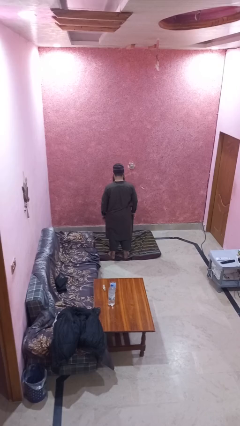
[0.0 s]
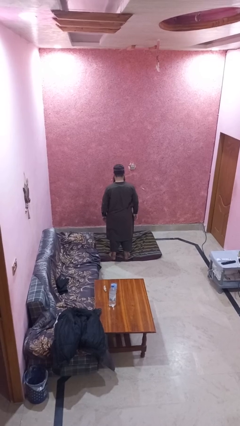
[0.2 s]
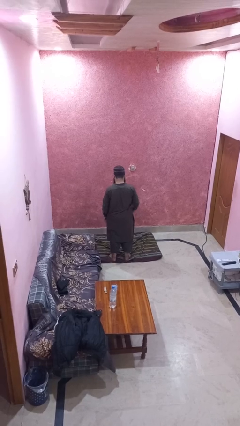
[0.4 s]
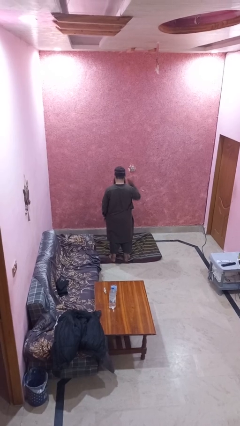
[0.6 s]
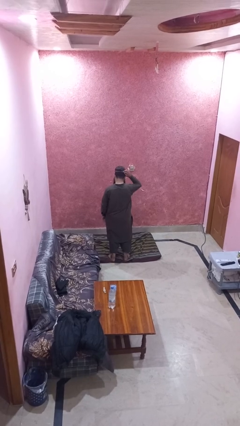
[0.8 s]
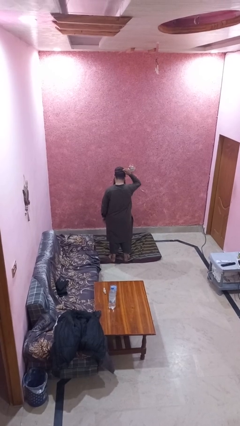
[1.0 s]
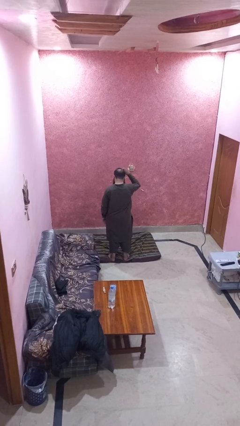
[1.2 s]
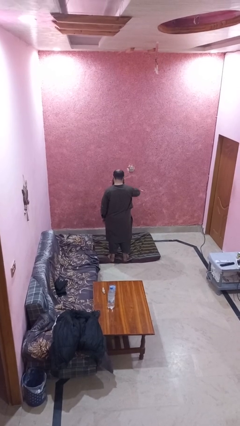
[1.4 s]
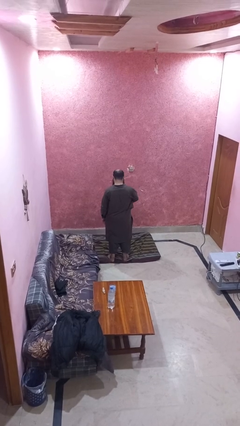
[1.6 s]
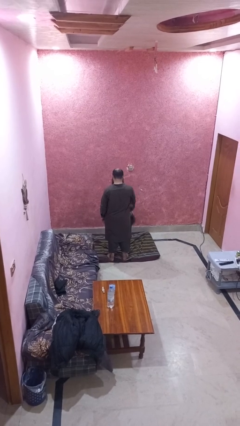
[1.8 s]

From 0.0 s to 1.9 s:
person takes off hat

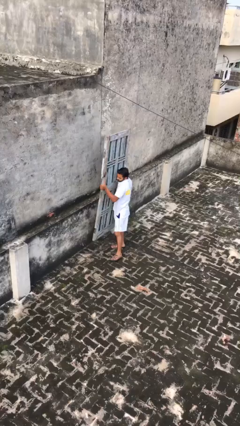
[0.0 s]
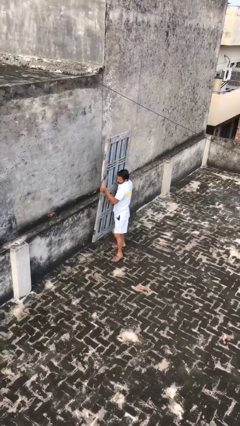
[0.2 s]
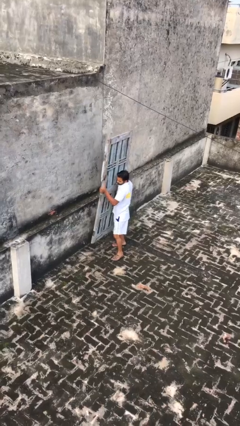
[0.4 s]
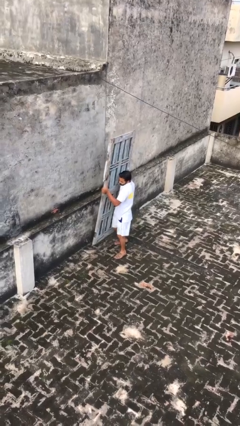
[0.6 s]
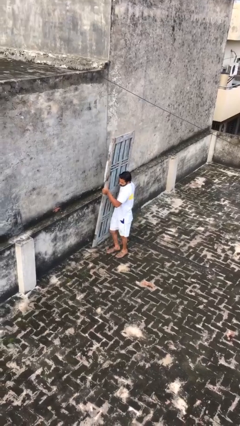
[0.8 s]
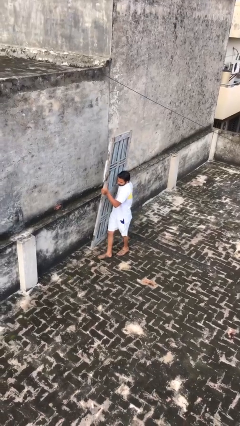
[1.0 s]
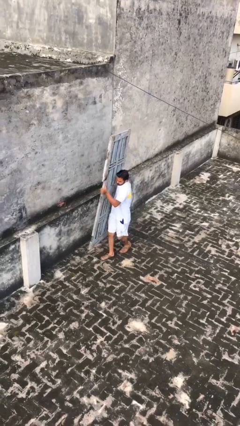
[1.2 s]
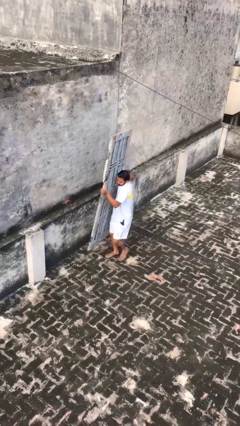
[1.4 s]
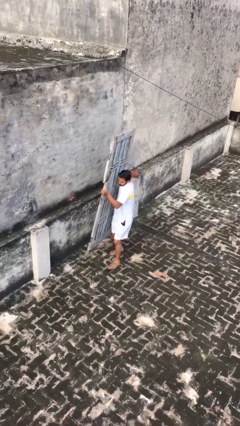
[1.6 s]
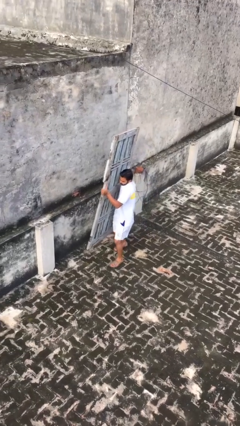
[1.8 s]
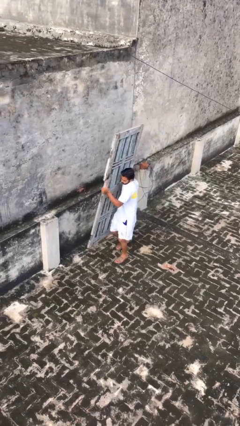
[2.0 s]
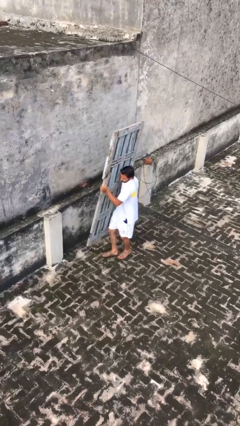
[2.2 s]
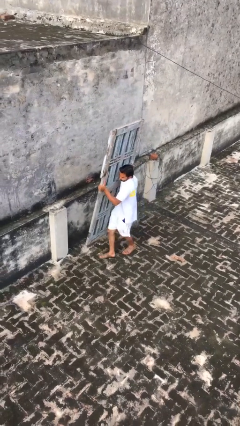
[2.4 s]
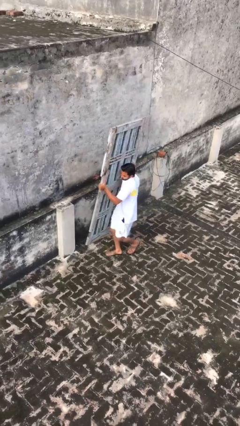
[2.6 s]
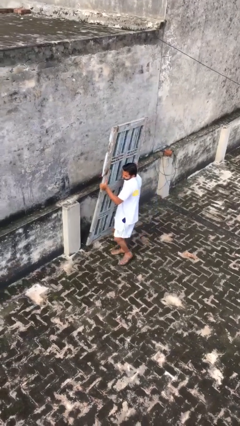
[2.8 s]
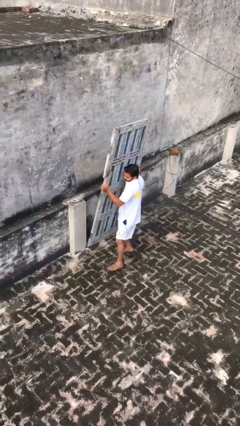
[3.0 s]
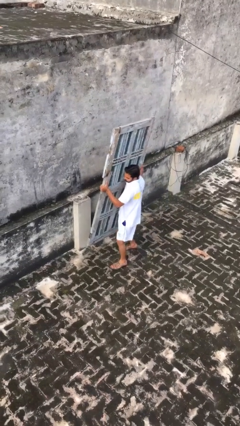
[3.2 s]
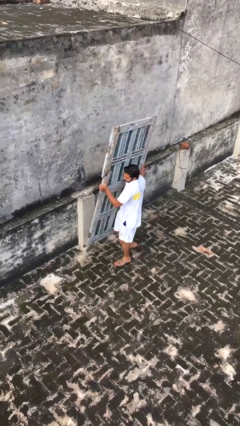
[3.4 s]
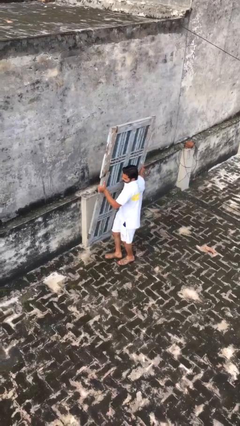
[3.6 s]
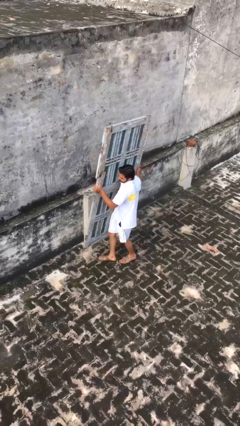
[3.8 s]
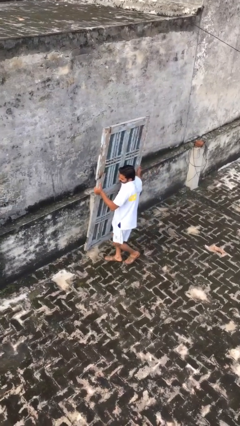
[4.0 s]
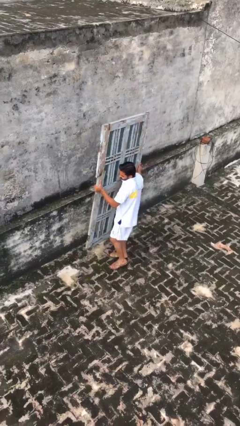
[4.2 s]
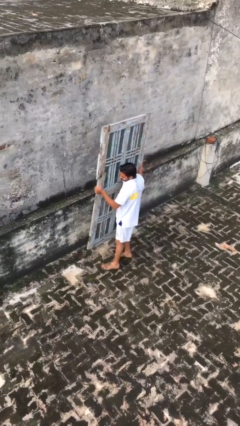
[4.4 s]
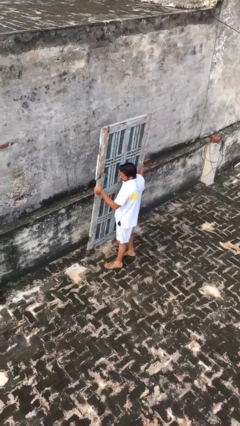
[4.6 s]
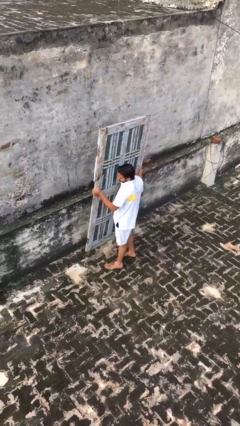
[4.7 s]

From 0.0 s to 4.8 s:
person carries heavy object

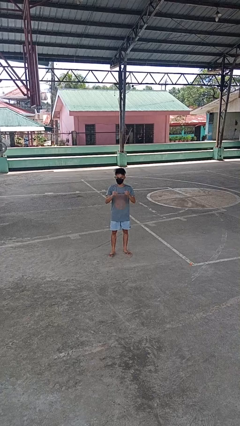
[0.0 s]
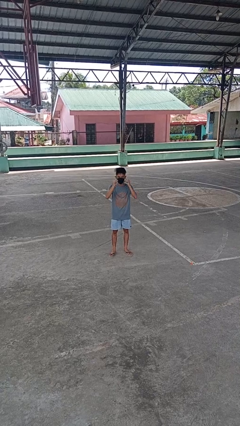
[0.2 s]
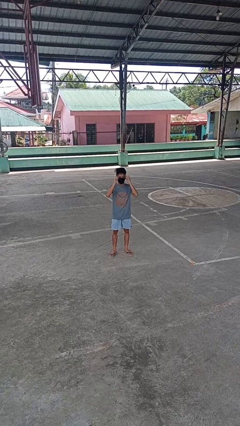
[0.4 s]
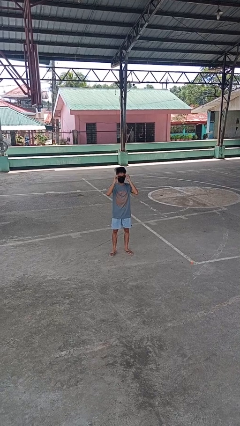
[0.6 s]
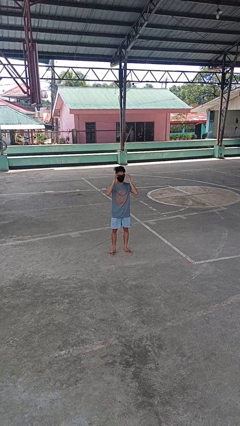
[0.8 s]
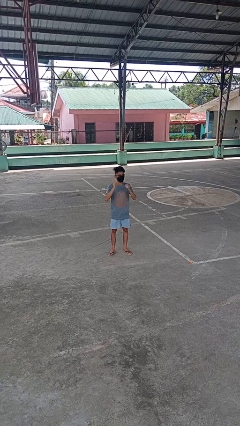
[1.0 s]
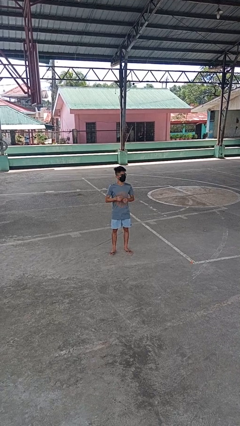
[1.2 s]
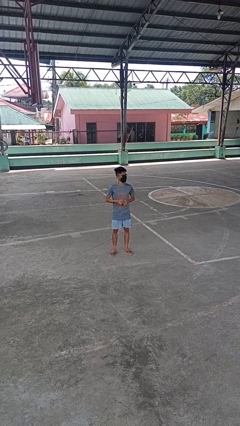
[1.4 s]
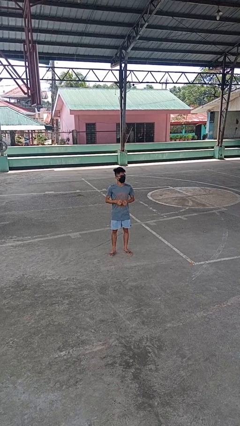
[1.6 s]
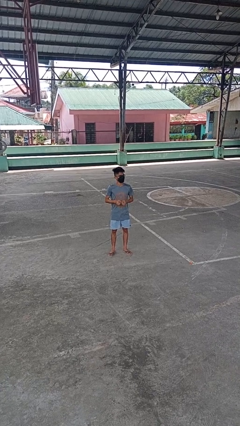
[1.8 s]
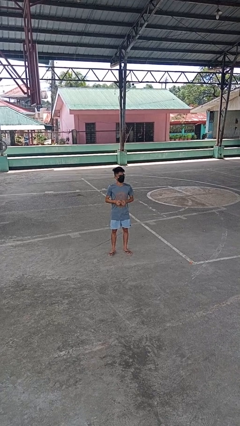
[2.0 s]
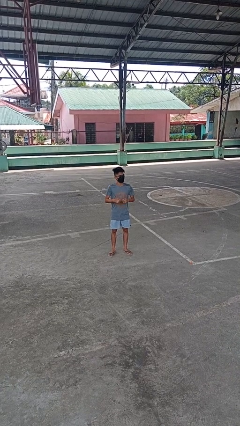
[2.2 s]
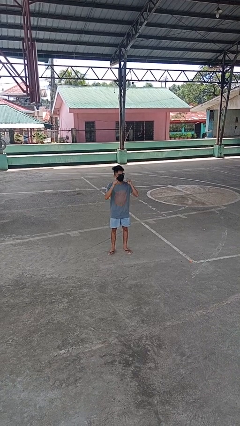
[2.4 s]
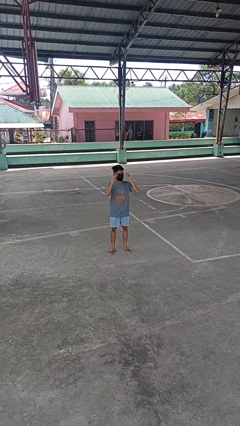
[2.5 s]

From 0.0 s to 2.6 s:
person puts on glasses

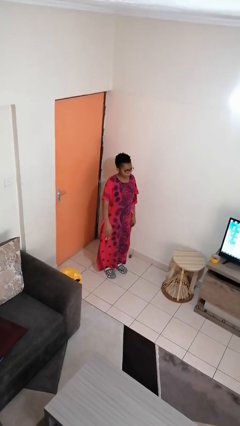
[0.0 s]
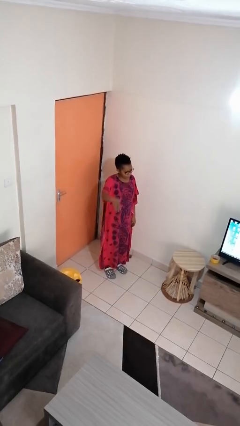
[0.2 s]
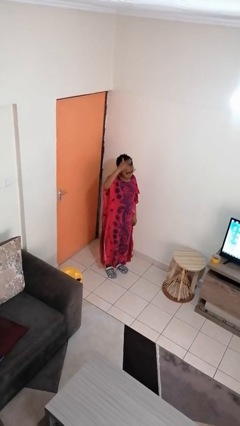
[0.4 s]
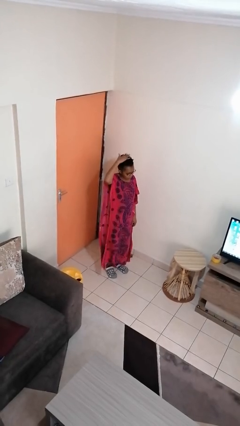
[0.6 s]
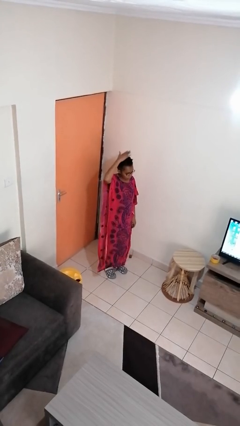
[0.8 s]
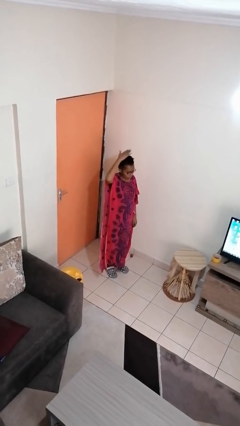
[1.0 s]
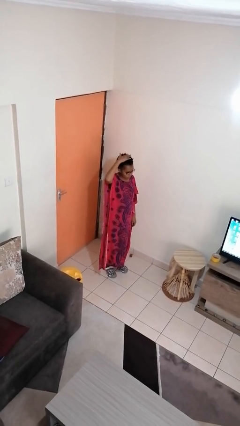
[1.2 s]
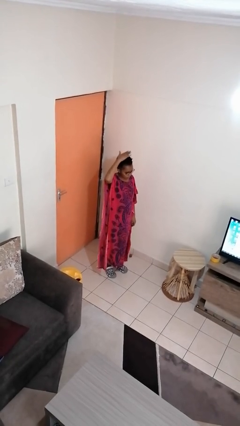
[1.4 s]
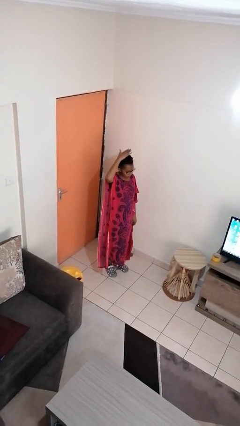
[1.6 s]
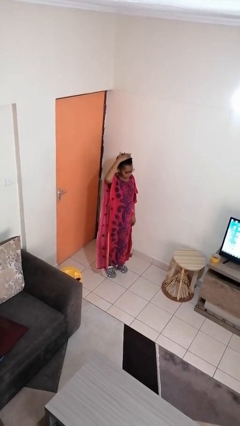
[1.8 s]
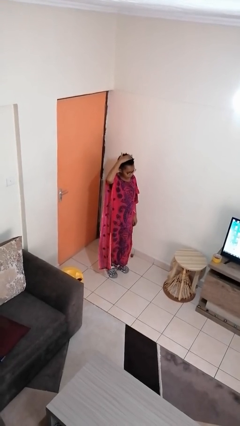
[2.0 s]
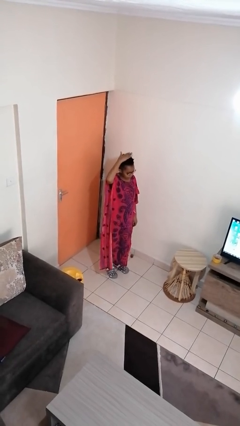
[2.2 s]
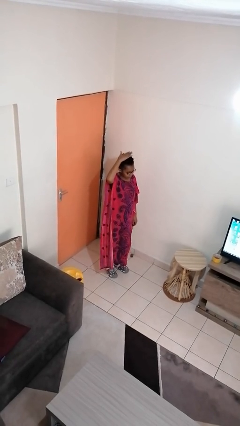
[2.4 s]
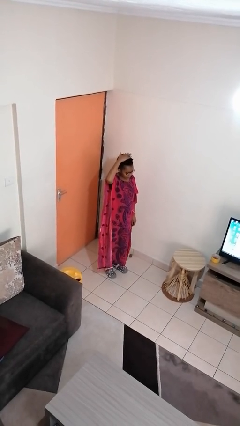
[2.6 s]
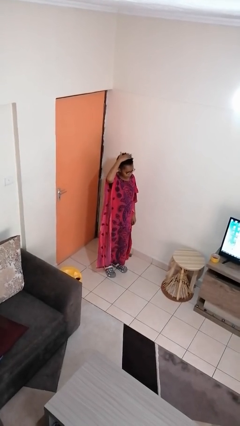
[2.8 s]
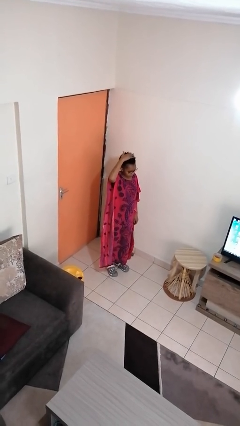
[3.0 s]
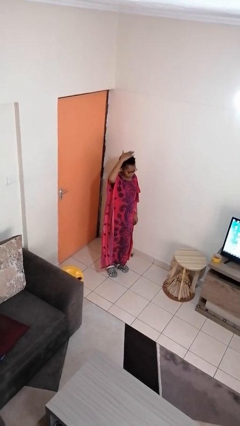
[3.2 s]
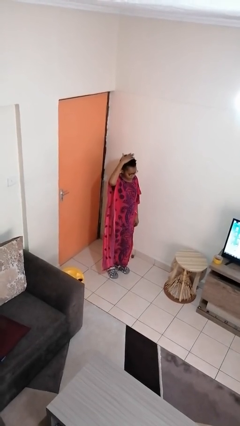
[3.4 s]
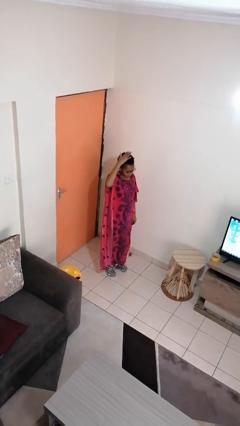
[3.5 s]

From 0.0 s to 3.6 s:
person pats head

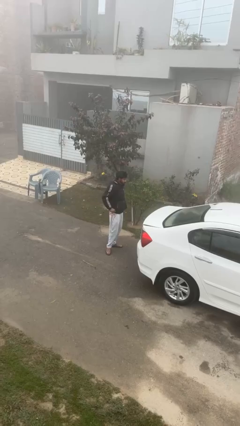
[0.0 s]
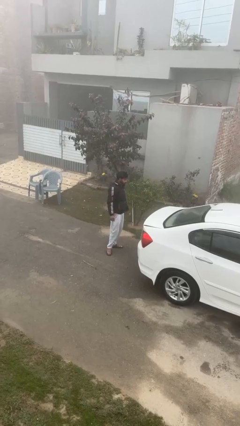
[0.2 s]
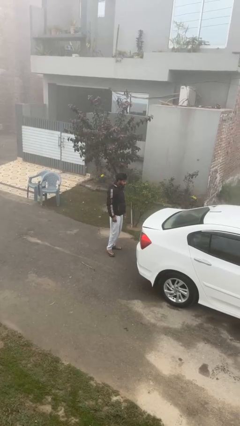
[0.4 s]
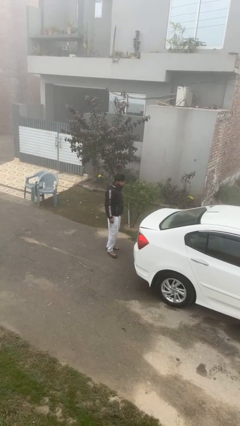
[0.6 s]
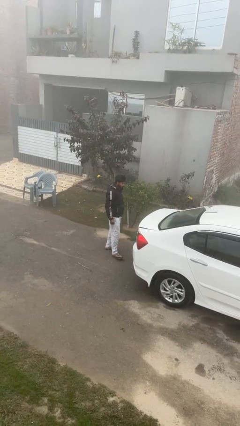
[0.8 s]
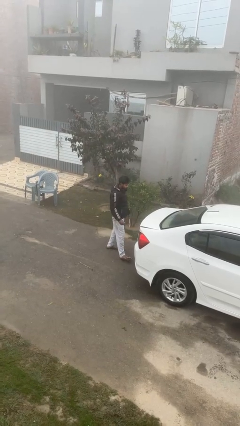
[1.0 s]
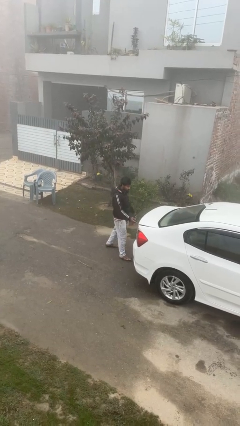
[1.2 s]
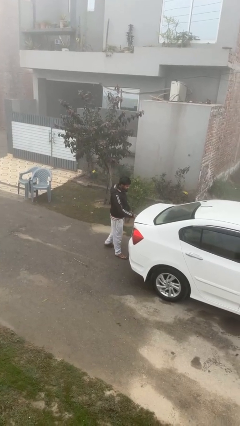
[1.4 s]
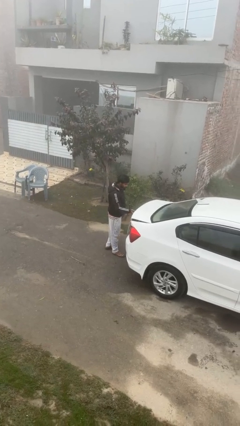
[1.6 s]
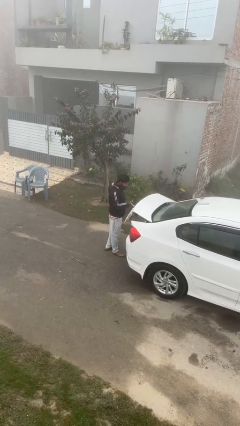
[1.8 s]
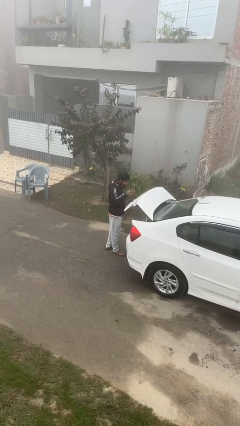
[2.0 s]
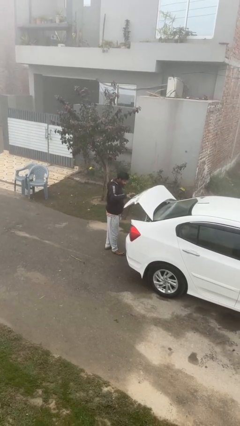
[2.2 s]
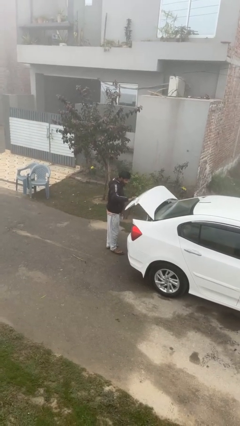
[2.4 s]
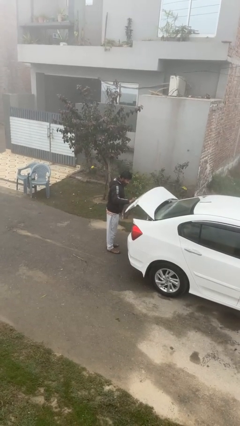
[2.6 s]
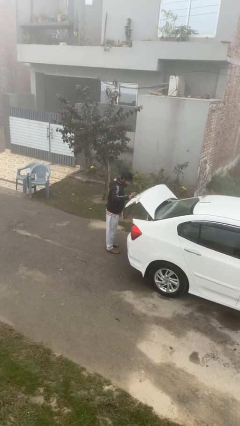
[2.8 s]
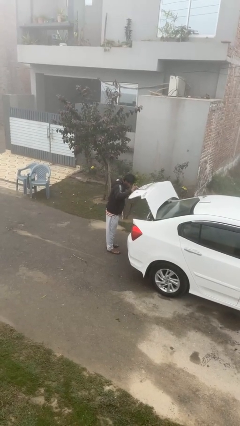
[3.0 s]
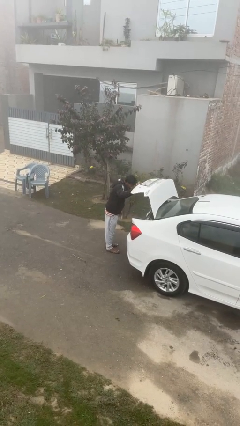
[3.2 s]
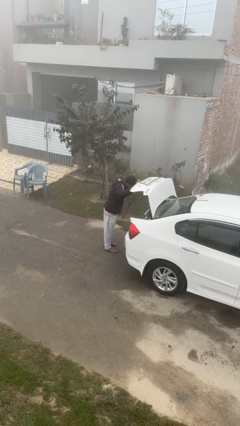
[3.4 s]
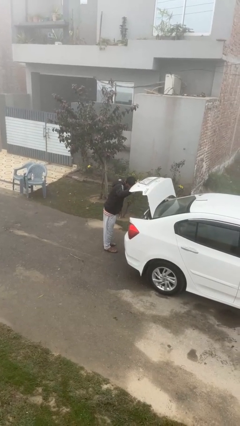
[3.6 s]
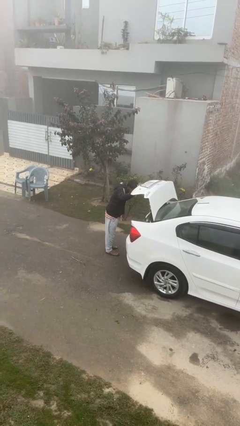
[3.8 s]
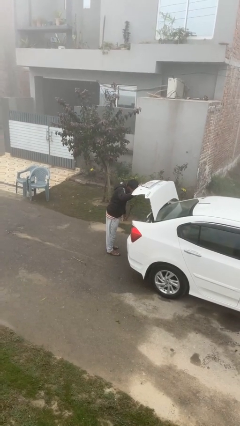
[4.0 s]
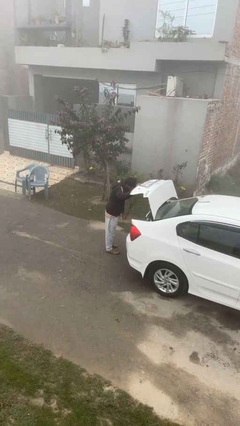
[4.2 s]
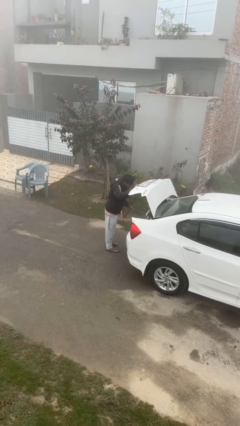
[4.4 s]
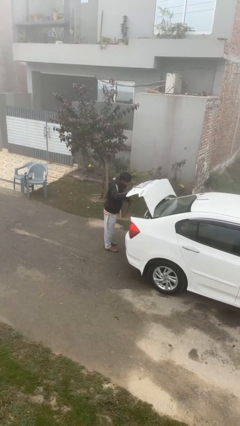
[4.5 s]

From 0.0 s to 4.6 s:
person opens car trunk

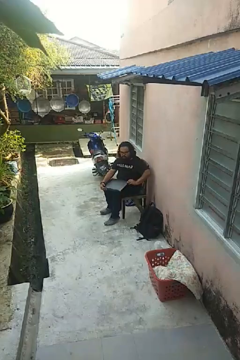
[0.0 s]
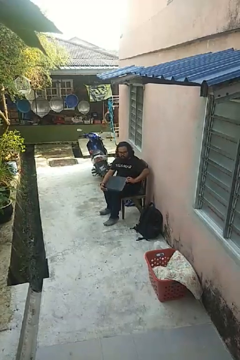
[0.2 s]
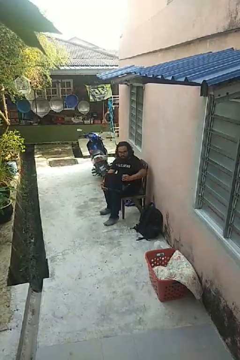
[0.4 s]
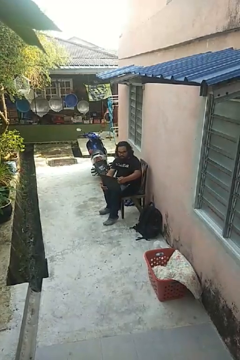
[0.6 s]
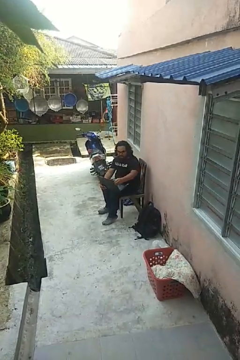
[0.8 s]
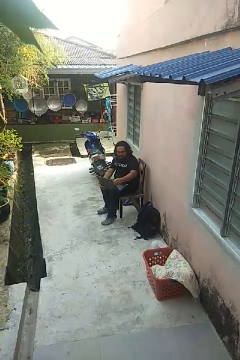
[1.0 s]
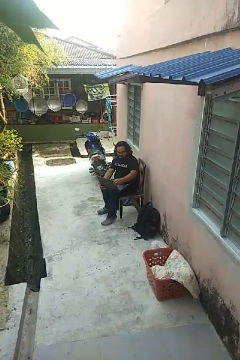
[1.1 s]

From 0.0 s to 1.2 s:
person opens laptop
